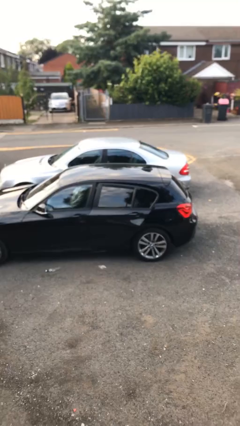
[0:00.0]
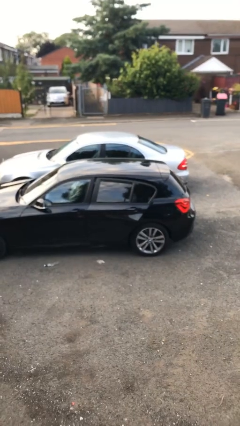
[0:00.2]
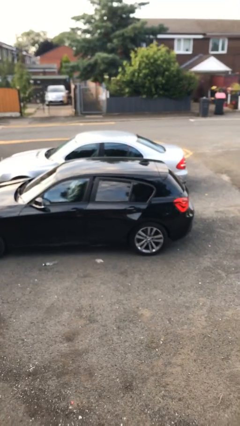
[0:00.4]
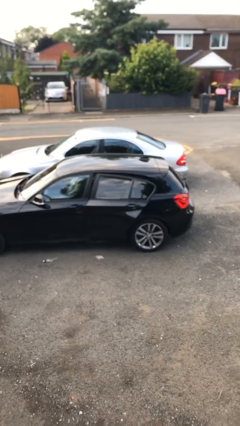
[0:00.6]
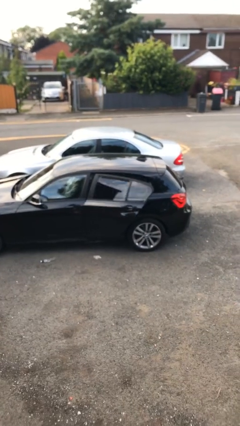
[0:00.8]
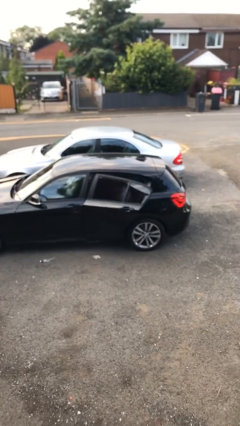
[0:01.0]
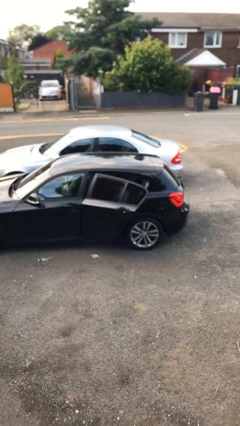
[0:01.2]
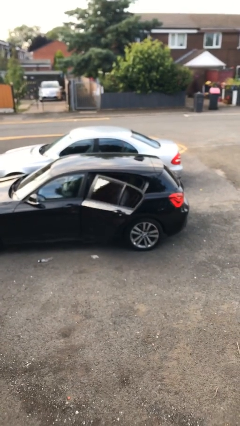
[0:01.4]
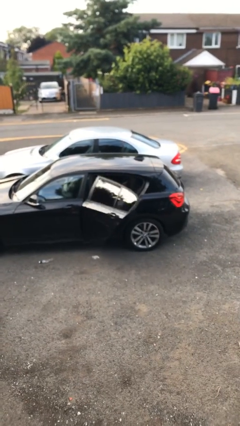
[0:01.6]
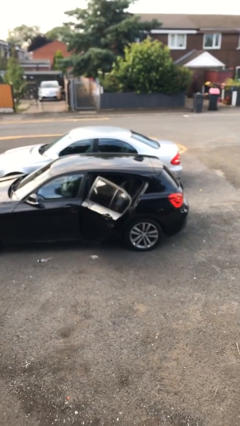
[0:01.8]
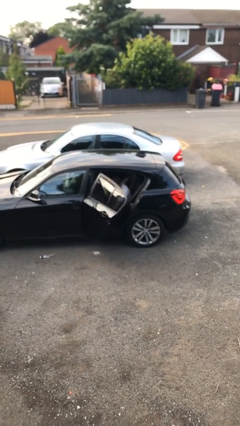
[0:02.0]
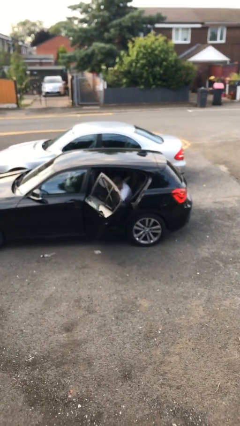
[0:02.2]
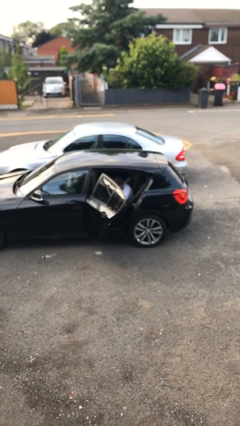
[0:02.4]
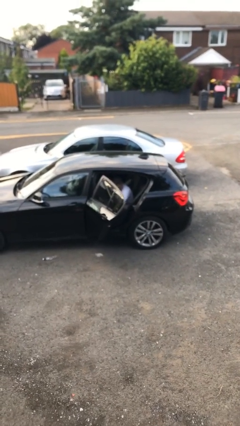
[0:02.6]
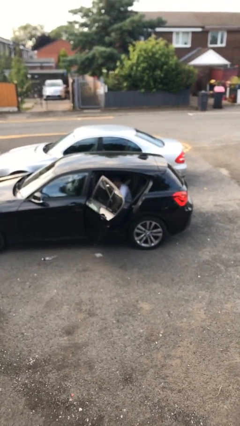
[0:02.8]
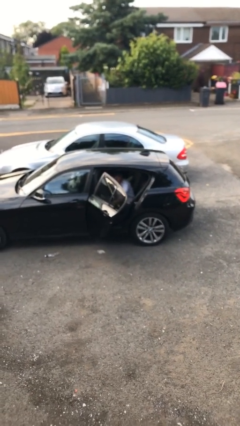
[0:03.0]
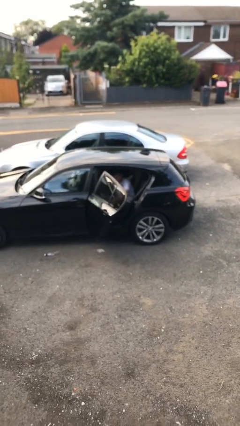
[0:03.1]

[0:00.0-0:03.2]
person opens car door

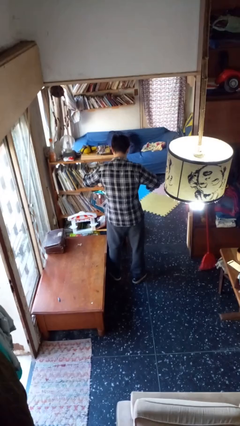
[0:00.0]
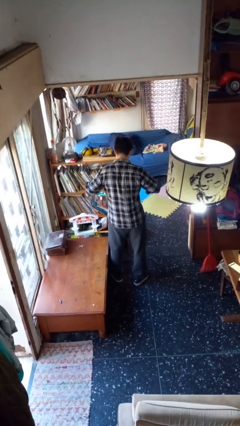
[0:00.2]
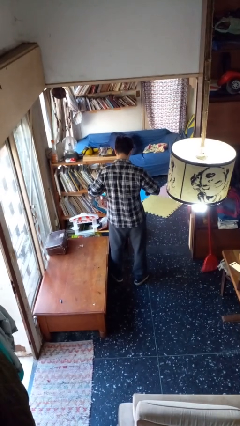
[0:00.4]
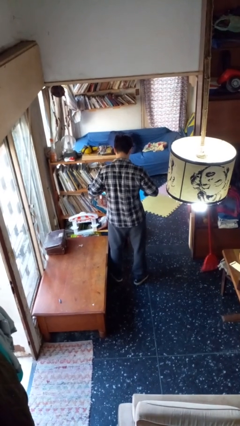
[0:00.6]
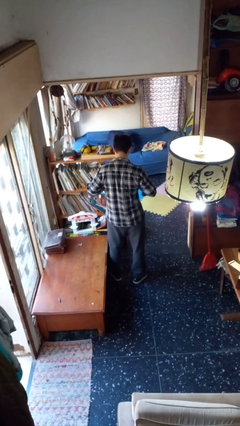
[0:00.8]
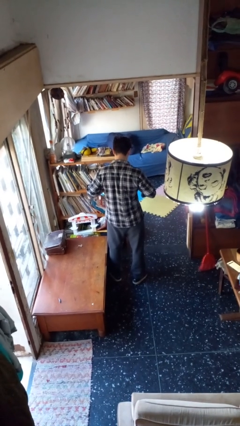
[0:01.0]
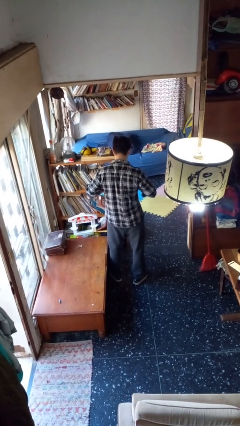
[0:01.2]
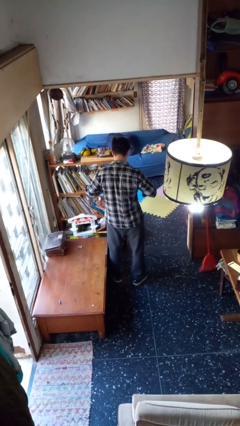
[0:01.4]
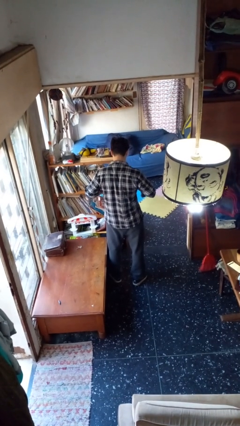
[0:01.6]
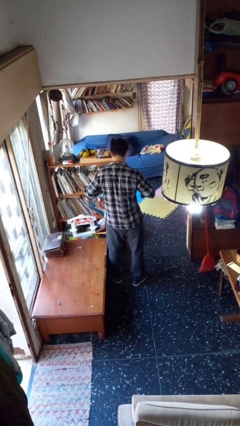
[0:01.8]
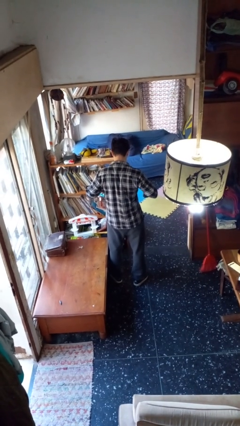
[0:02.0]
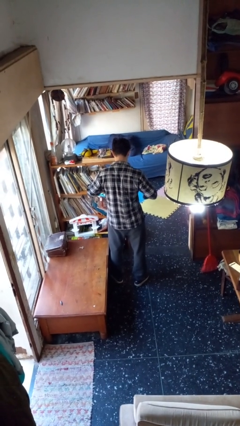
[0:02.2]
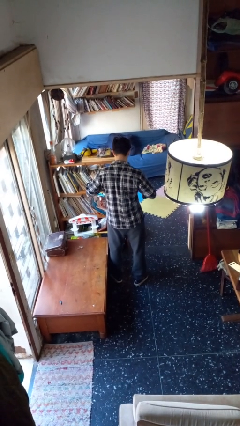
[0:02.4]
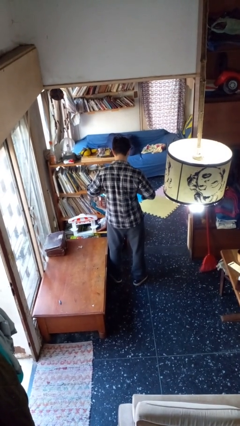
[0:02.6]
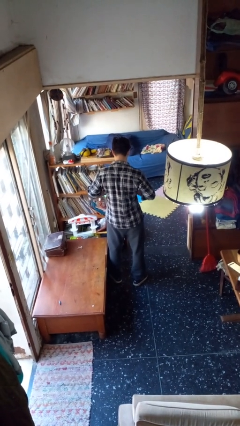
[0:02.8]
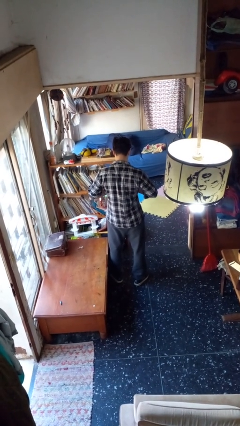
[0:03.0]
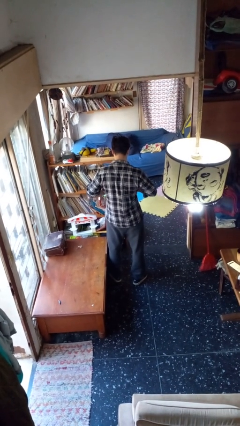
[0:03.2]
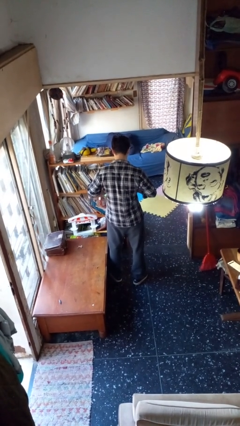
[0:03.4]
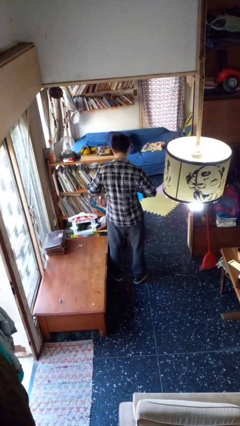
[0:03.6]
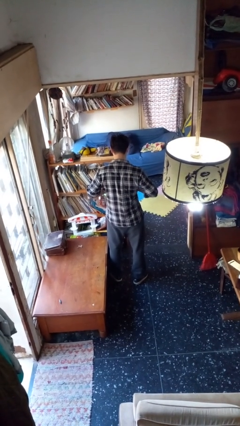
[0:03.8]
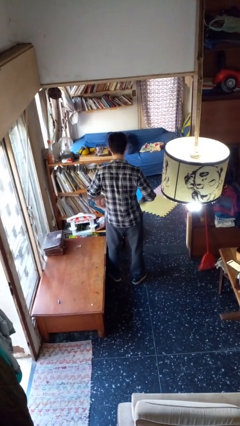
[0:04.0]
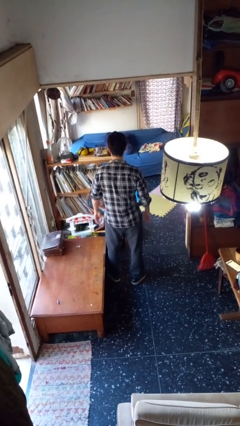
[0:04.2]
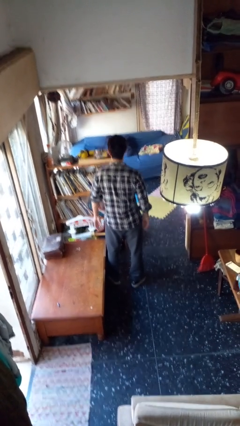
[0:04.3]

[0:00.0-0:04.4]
person buttons shirt

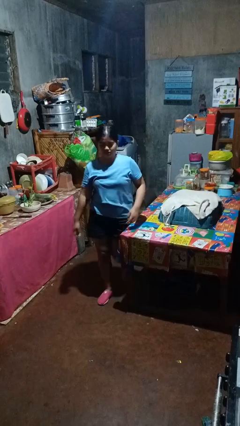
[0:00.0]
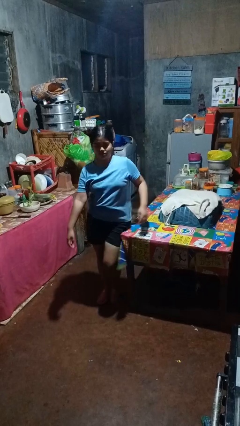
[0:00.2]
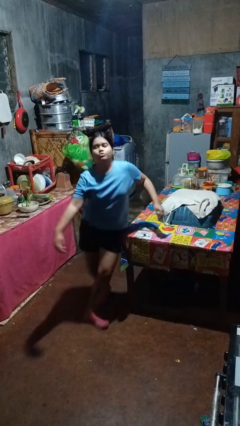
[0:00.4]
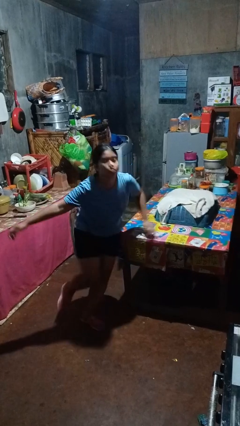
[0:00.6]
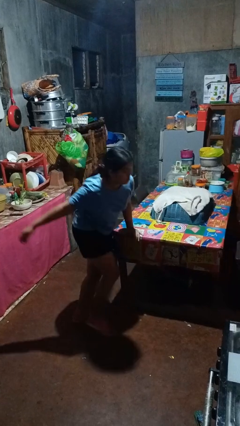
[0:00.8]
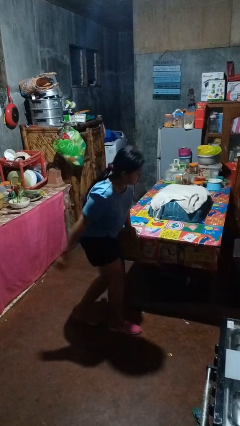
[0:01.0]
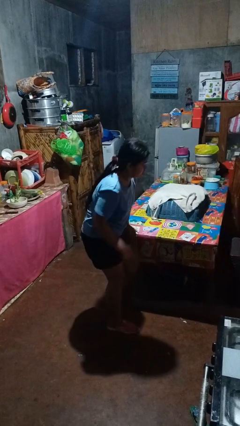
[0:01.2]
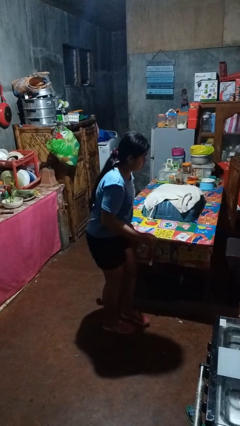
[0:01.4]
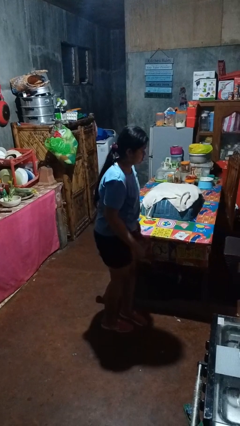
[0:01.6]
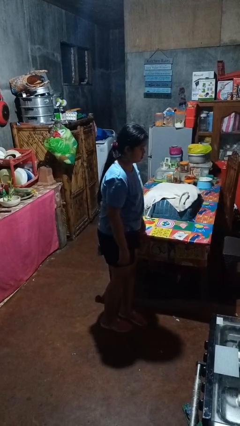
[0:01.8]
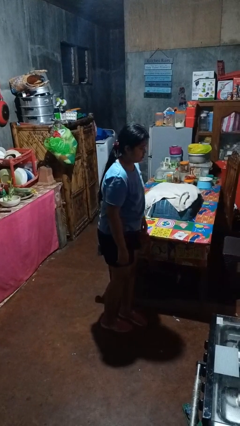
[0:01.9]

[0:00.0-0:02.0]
person bumps into table

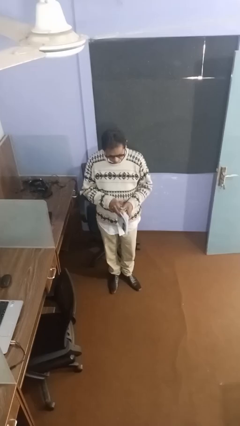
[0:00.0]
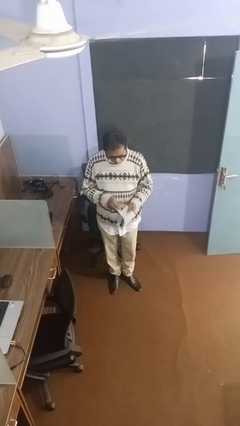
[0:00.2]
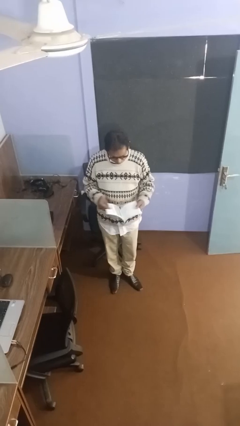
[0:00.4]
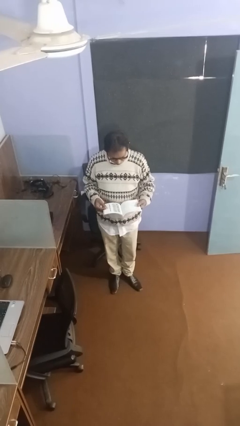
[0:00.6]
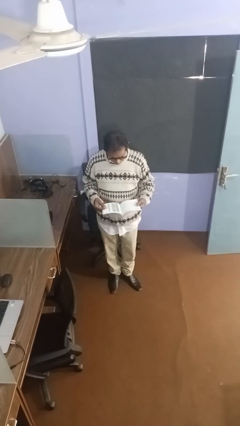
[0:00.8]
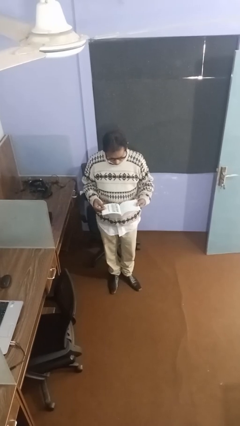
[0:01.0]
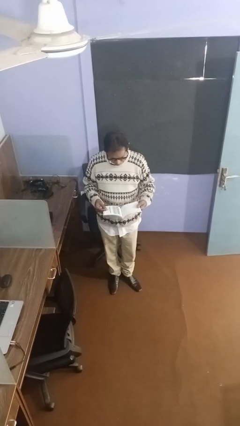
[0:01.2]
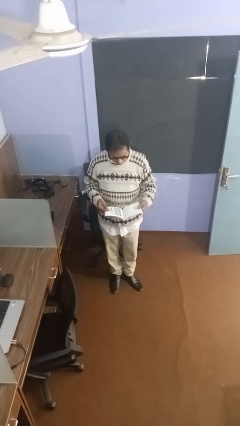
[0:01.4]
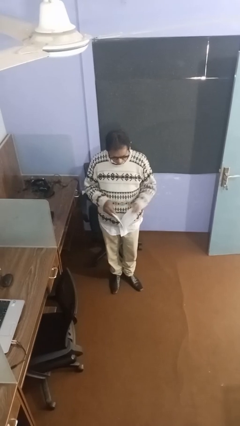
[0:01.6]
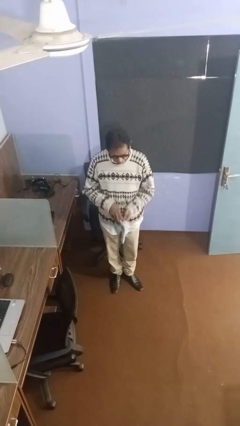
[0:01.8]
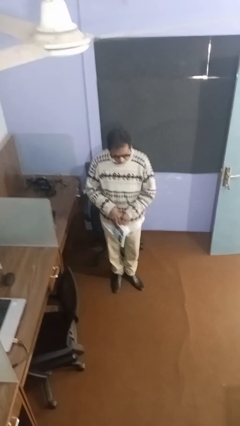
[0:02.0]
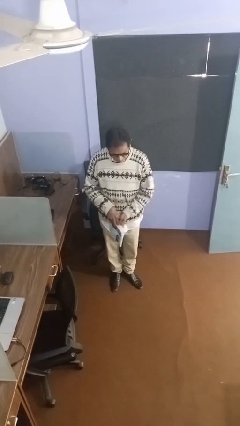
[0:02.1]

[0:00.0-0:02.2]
person reads document

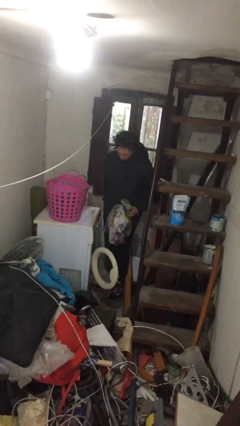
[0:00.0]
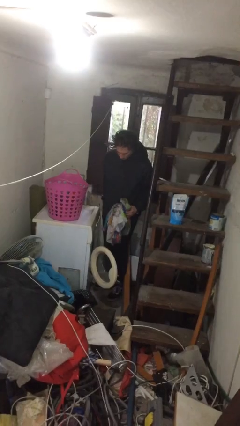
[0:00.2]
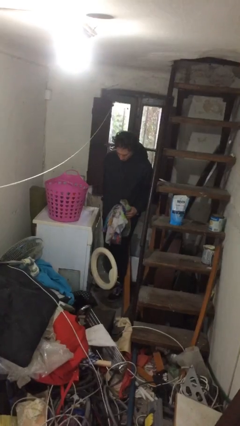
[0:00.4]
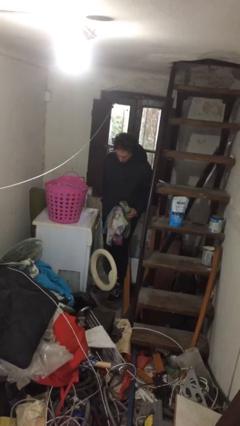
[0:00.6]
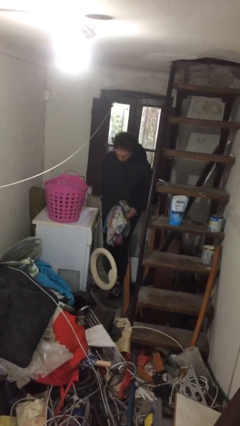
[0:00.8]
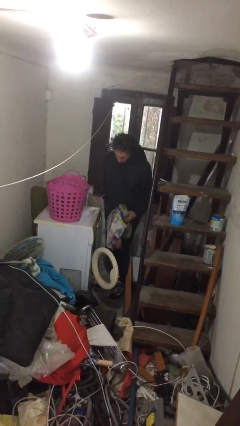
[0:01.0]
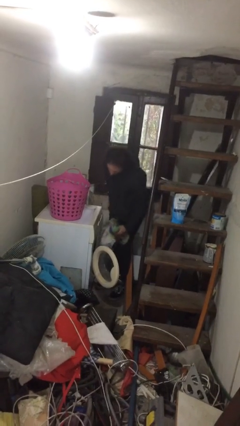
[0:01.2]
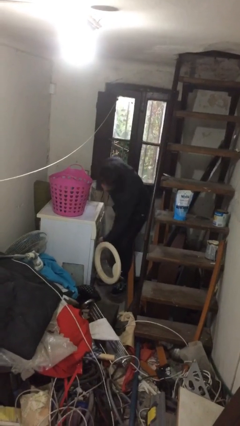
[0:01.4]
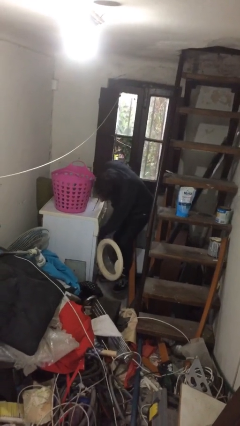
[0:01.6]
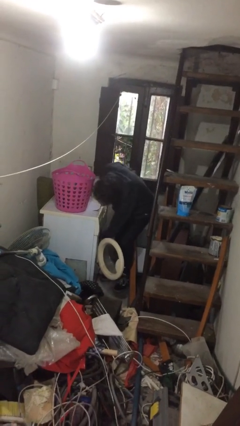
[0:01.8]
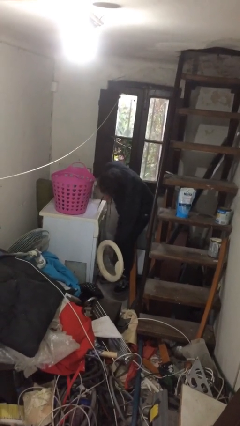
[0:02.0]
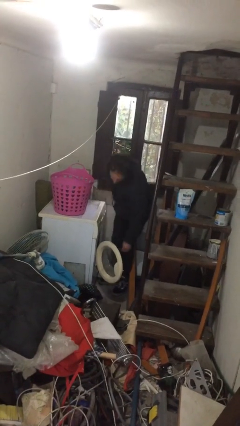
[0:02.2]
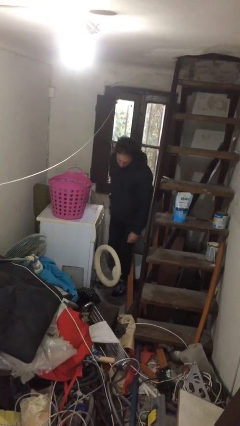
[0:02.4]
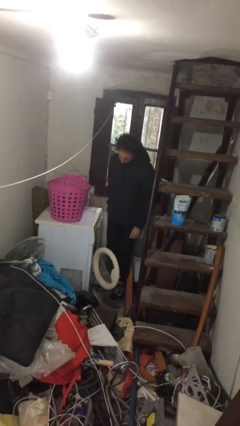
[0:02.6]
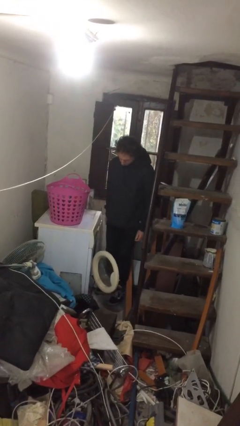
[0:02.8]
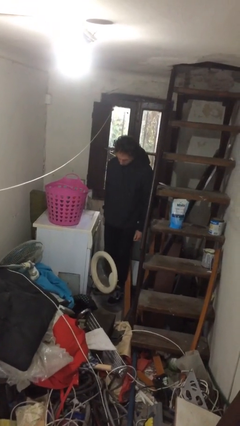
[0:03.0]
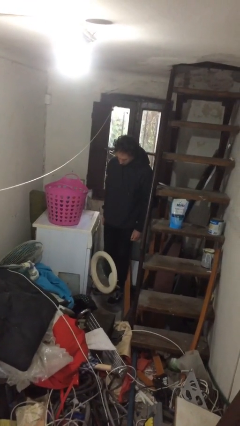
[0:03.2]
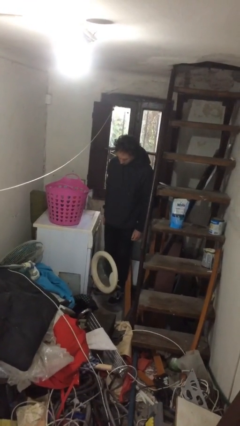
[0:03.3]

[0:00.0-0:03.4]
person loads clotheswasher

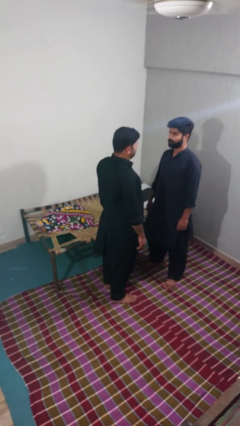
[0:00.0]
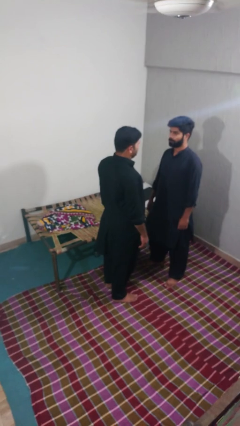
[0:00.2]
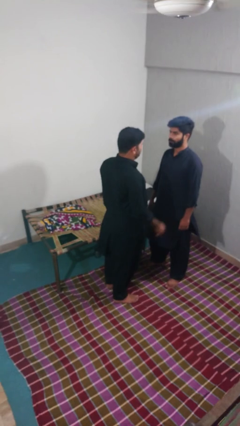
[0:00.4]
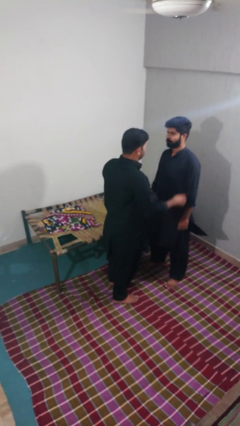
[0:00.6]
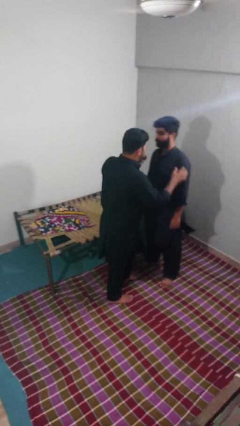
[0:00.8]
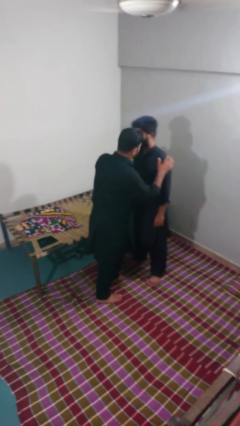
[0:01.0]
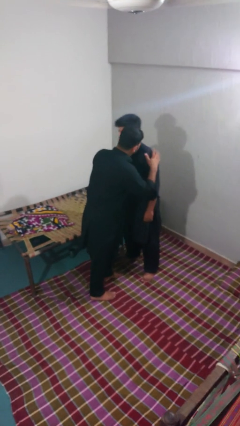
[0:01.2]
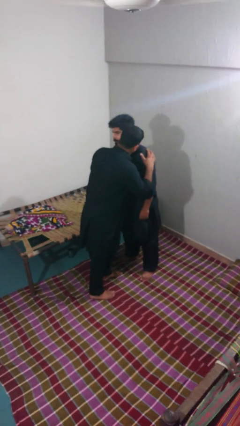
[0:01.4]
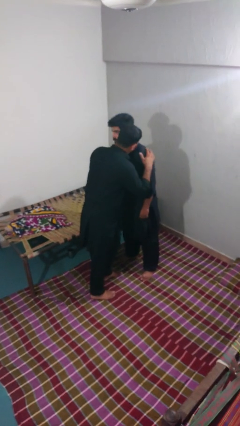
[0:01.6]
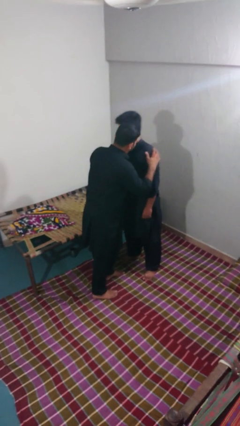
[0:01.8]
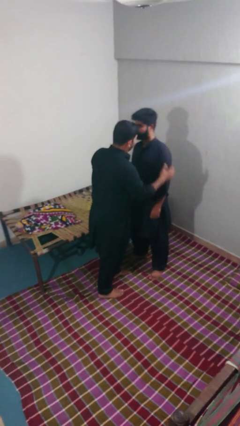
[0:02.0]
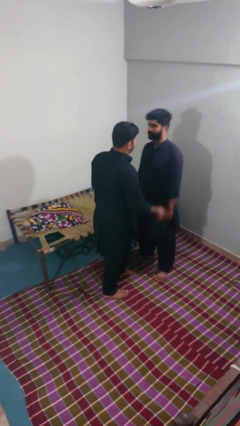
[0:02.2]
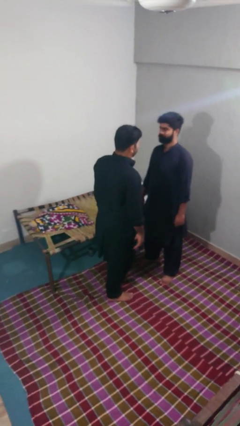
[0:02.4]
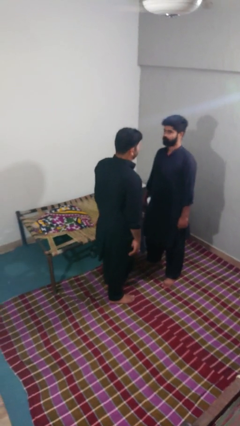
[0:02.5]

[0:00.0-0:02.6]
person kisses cheek of person

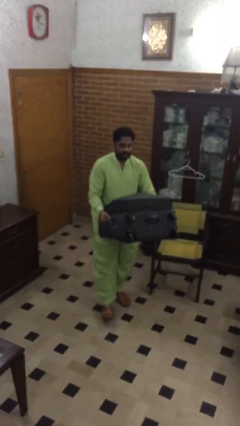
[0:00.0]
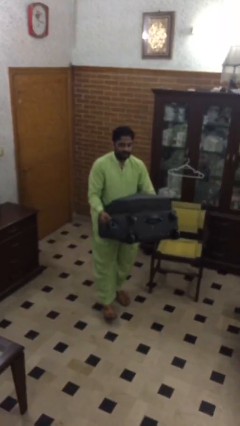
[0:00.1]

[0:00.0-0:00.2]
person puts down object on floor
